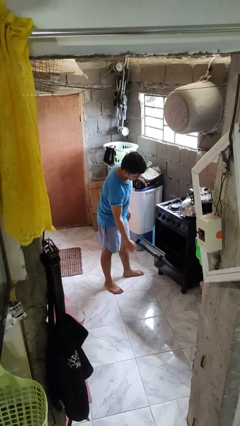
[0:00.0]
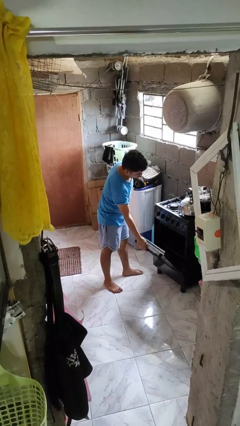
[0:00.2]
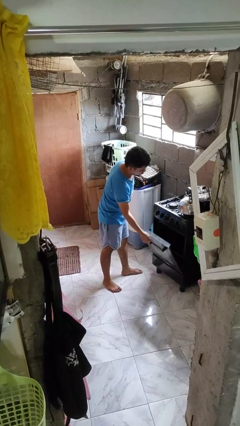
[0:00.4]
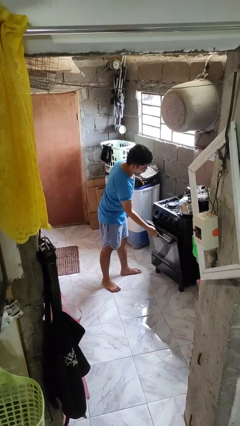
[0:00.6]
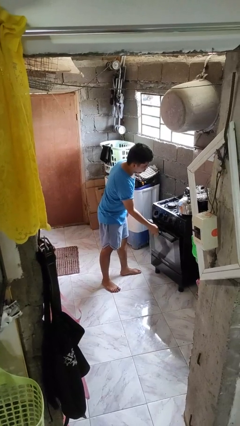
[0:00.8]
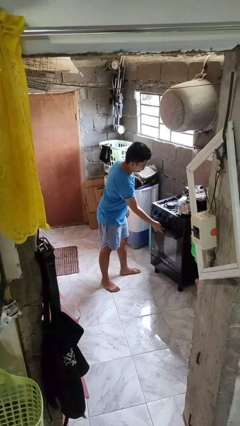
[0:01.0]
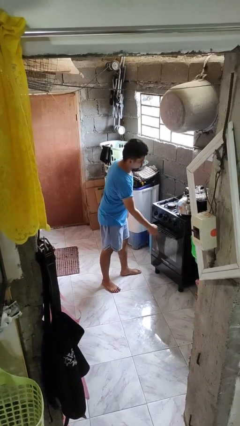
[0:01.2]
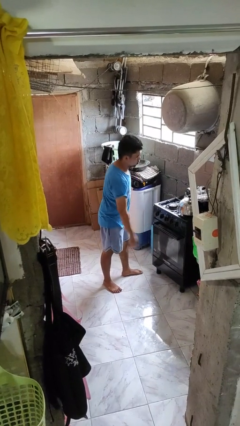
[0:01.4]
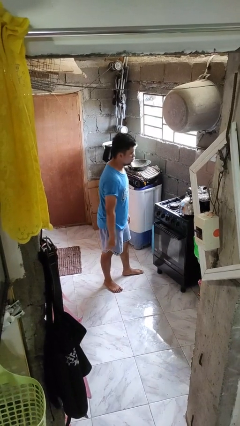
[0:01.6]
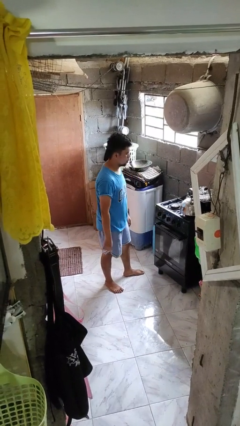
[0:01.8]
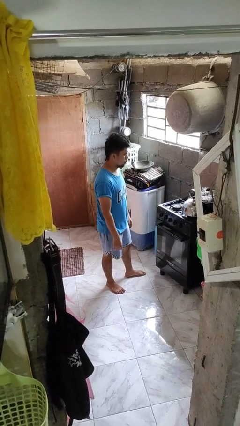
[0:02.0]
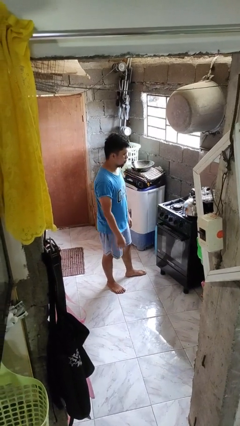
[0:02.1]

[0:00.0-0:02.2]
person closes oven door

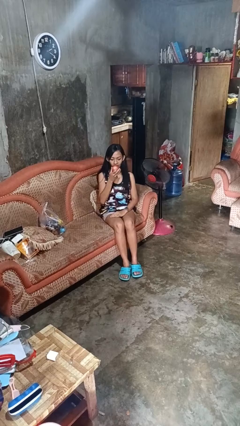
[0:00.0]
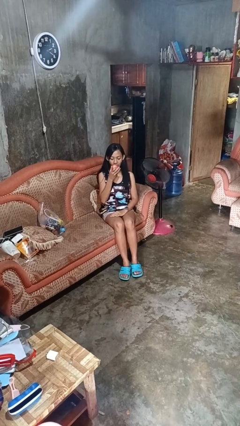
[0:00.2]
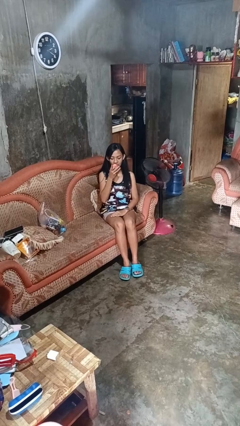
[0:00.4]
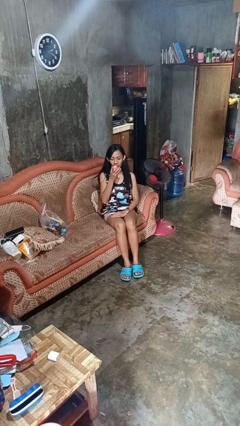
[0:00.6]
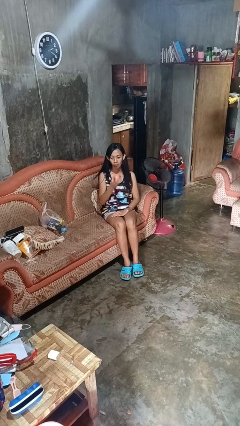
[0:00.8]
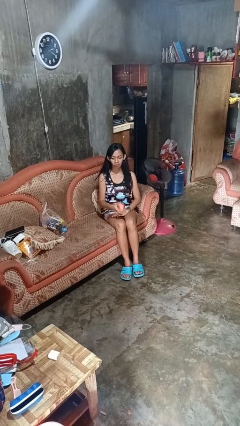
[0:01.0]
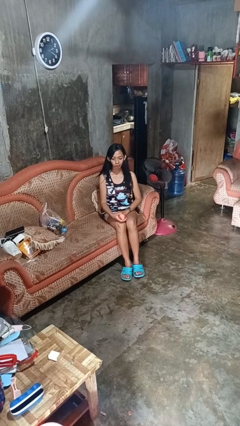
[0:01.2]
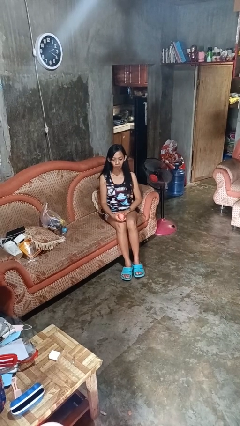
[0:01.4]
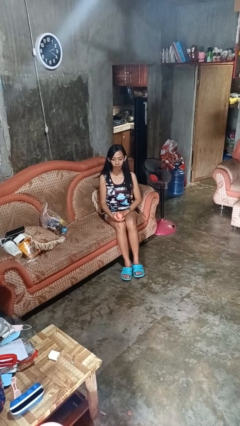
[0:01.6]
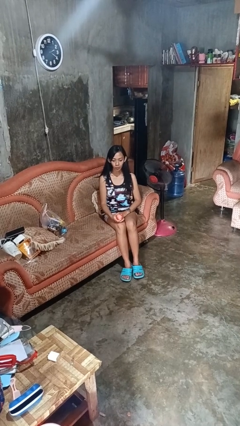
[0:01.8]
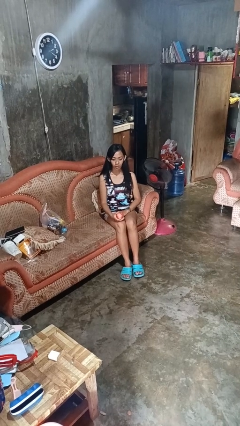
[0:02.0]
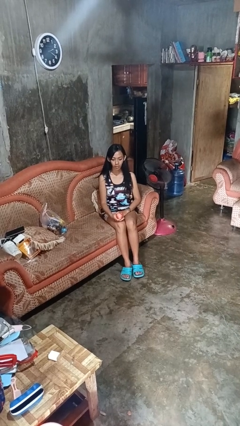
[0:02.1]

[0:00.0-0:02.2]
person eats apple

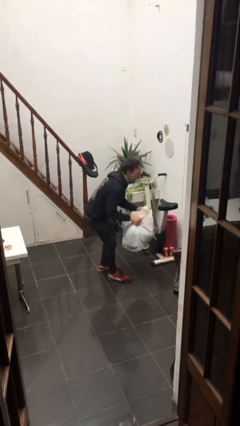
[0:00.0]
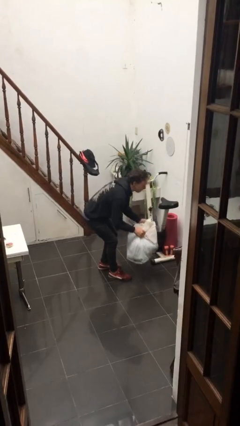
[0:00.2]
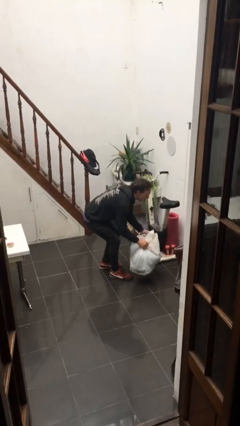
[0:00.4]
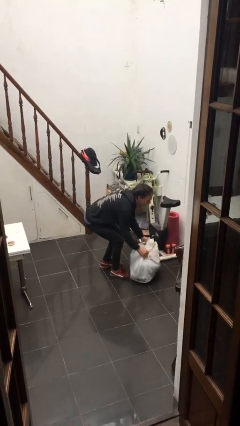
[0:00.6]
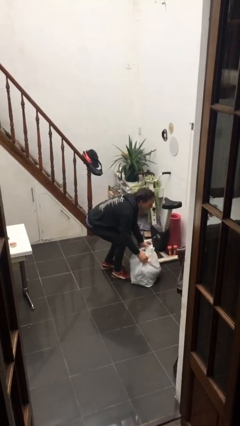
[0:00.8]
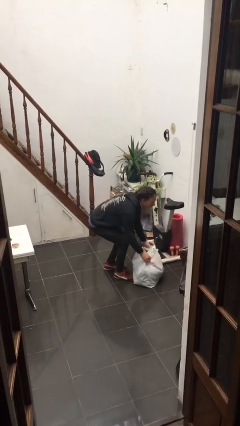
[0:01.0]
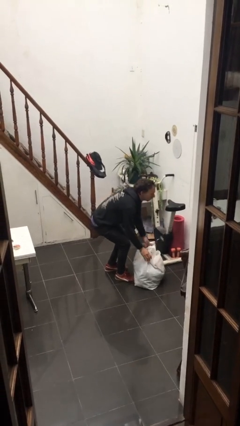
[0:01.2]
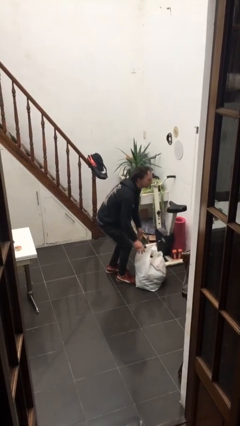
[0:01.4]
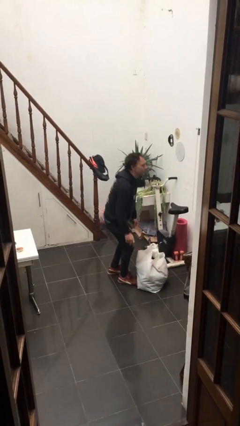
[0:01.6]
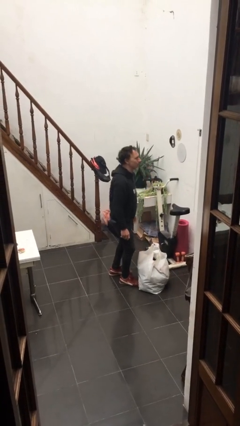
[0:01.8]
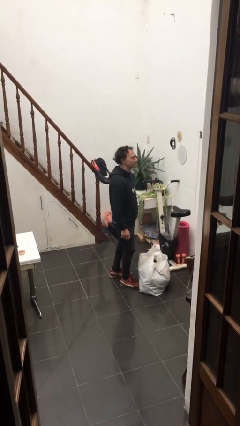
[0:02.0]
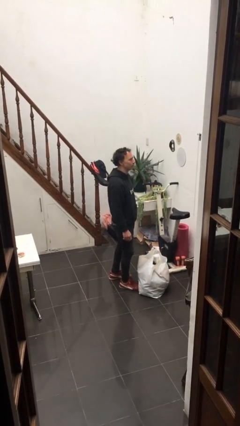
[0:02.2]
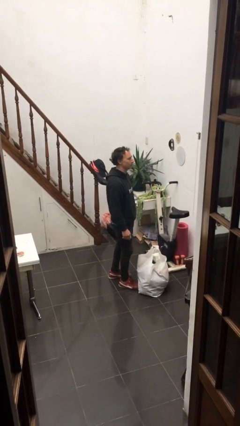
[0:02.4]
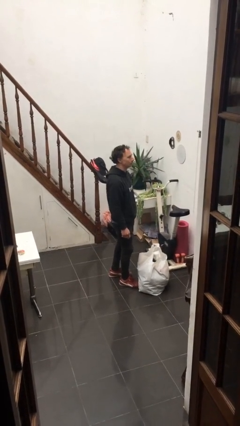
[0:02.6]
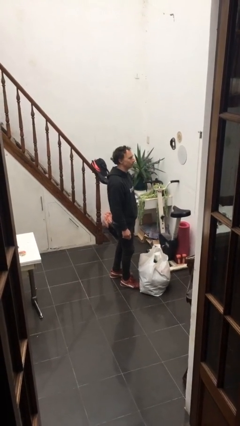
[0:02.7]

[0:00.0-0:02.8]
person puts down object on floor

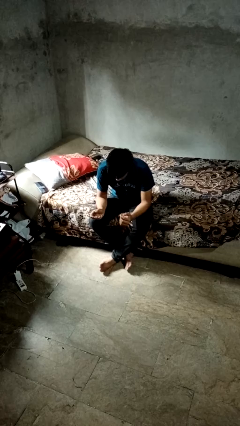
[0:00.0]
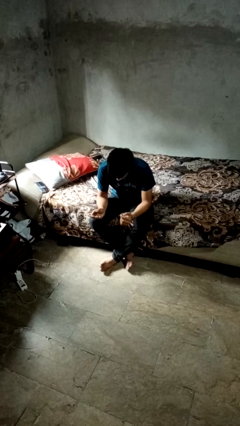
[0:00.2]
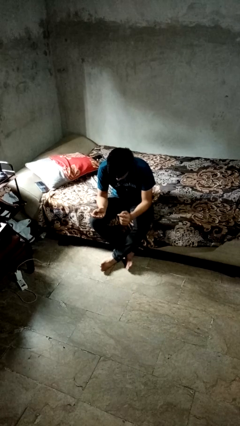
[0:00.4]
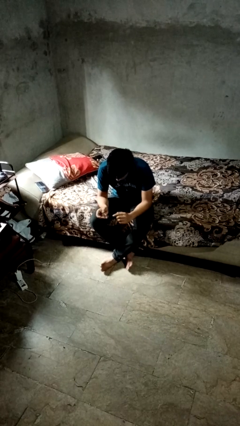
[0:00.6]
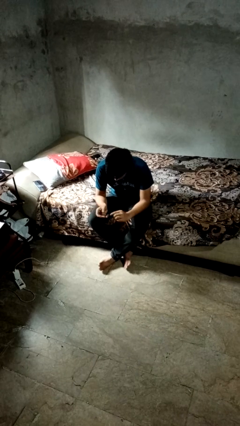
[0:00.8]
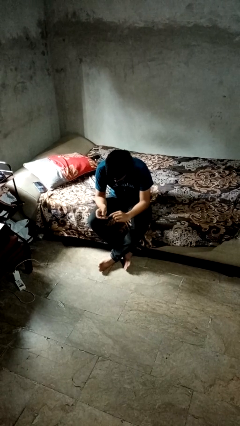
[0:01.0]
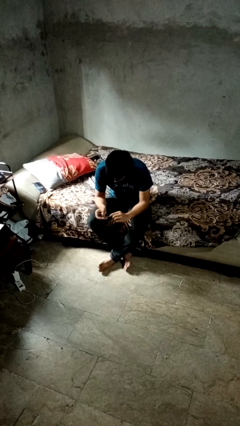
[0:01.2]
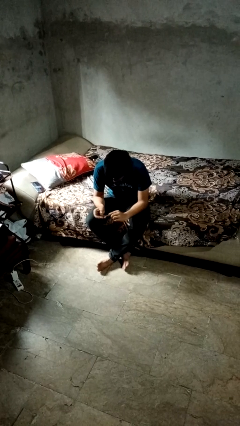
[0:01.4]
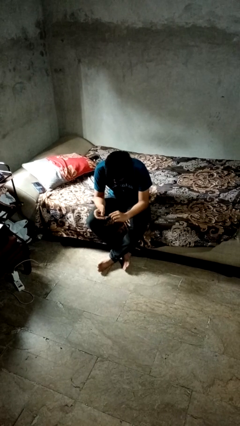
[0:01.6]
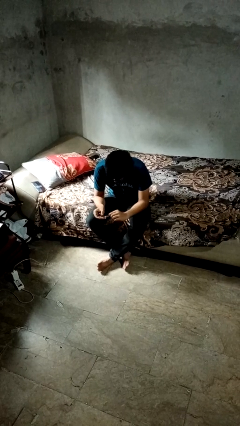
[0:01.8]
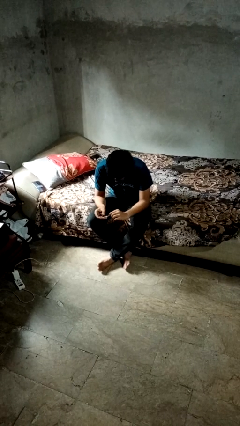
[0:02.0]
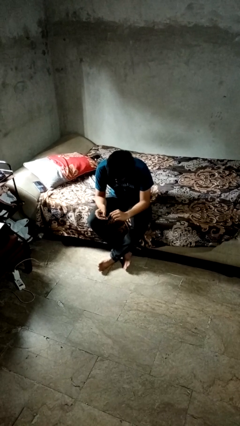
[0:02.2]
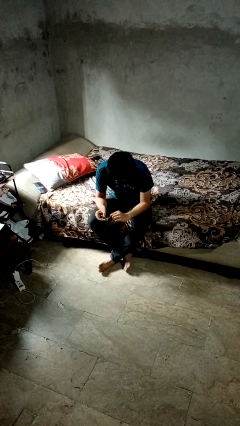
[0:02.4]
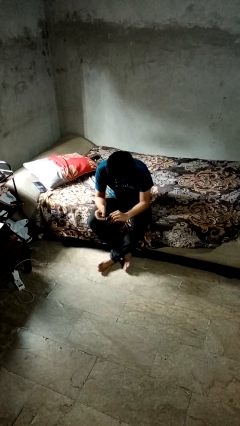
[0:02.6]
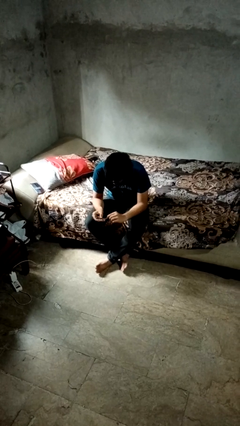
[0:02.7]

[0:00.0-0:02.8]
person clips fingernails

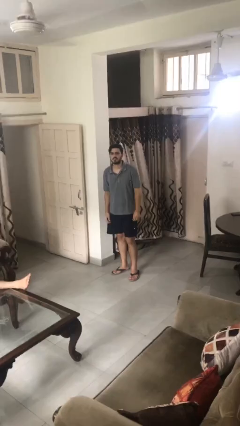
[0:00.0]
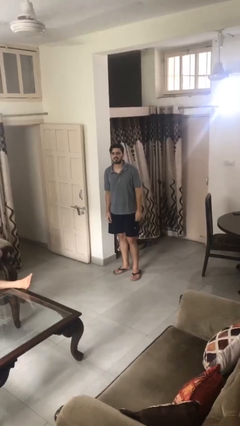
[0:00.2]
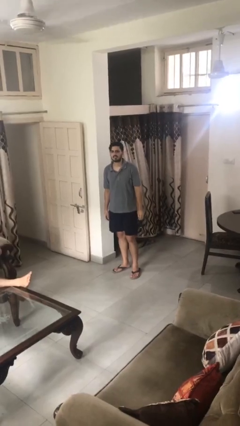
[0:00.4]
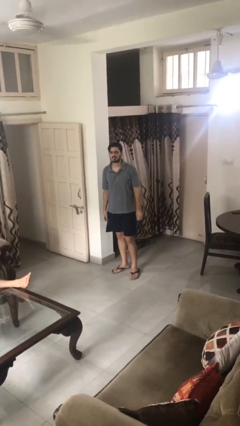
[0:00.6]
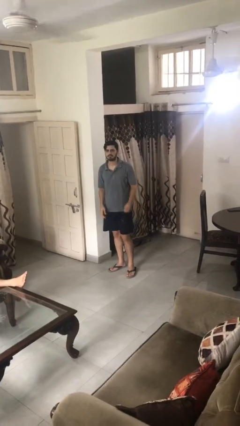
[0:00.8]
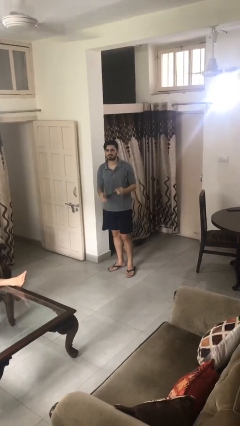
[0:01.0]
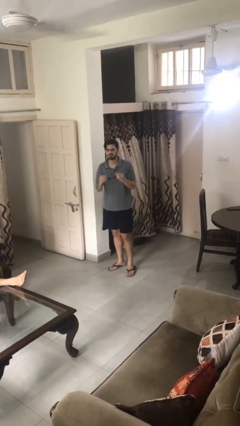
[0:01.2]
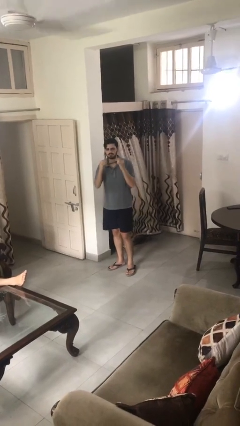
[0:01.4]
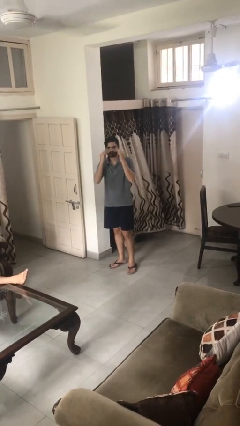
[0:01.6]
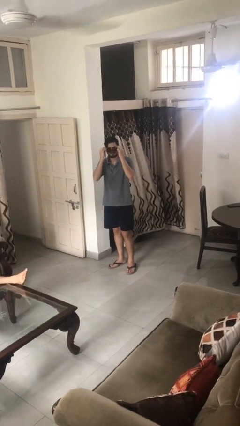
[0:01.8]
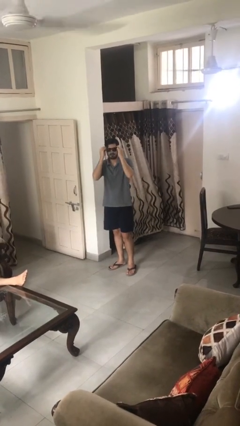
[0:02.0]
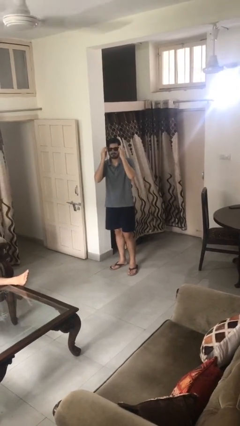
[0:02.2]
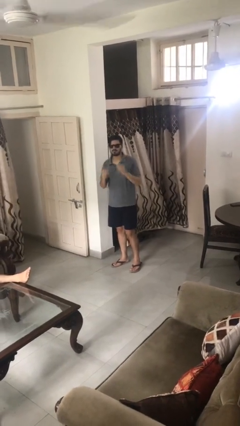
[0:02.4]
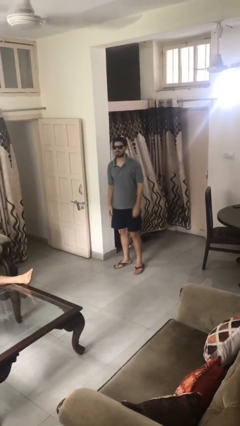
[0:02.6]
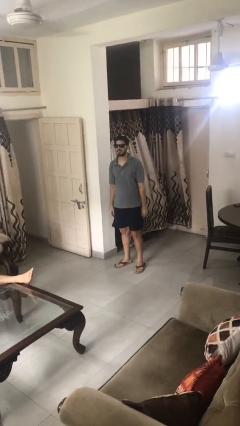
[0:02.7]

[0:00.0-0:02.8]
person puts on sunglasses

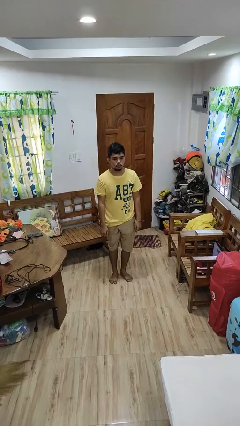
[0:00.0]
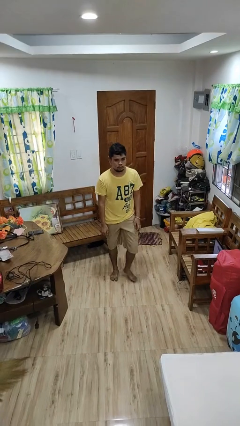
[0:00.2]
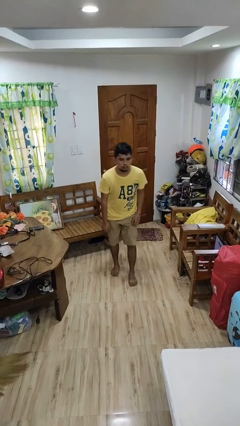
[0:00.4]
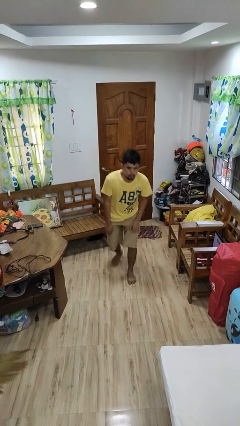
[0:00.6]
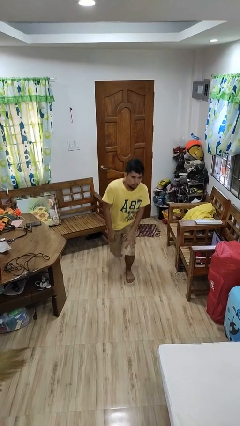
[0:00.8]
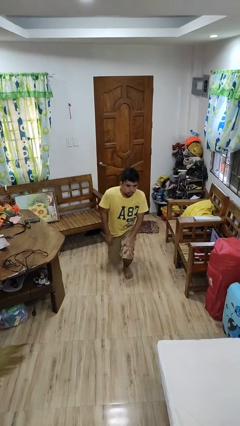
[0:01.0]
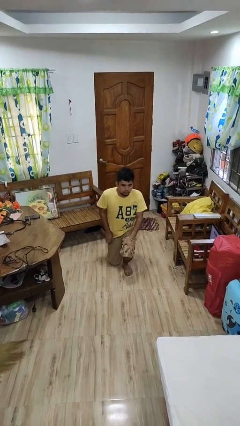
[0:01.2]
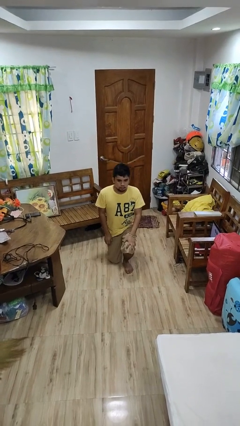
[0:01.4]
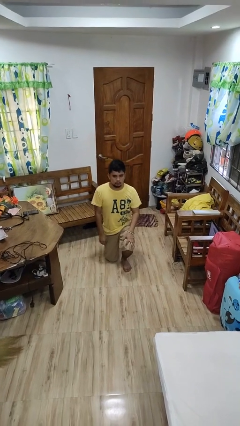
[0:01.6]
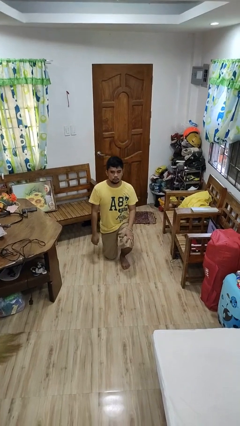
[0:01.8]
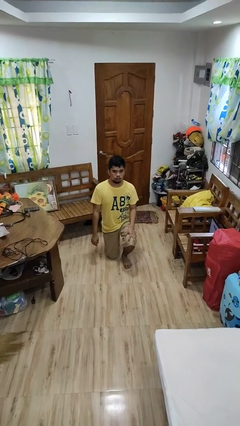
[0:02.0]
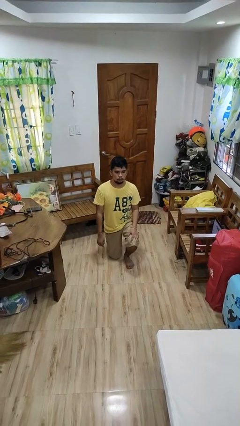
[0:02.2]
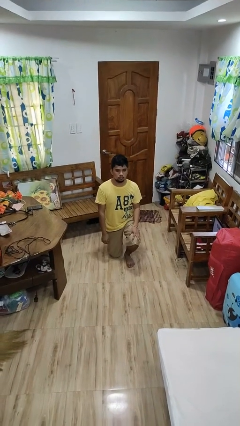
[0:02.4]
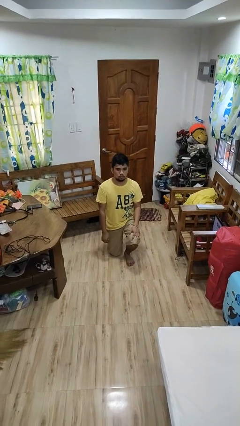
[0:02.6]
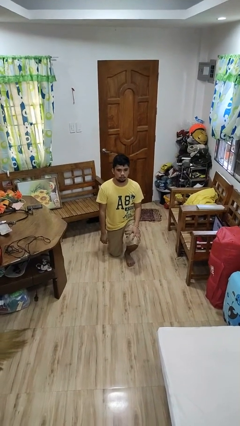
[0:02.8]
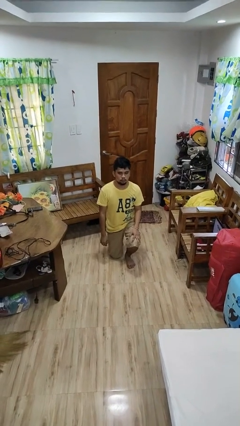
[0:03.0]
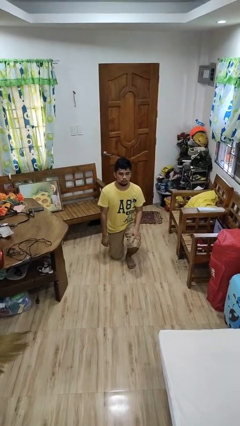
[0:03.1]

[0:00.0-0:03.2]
person kneels

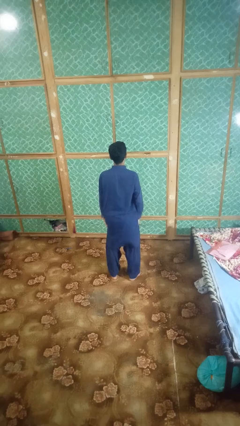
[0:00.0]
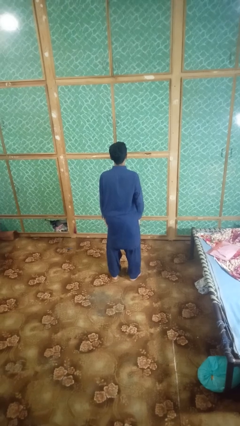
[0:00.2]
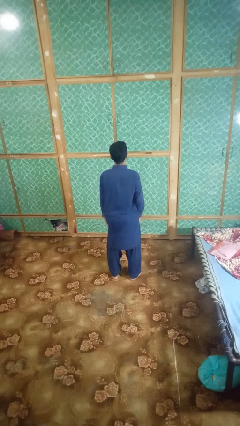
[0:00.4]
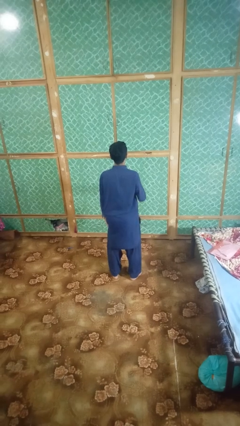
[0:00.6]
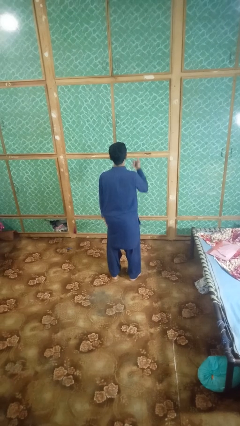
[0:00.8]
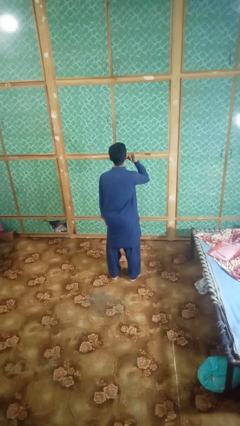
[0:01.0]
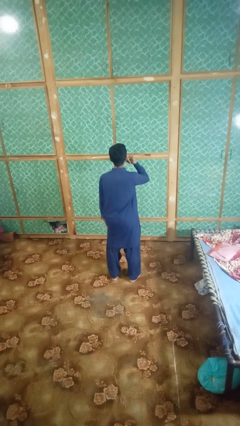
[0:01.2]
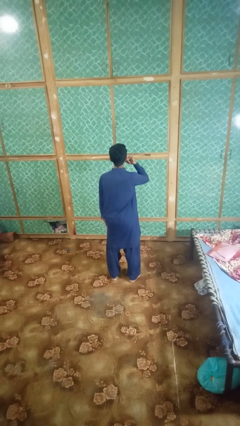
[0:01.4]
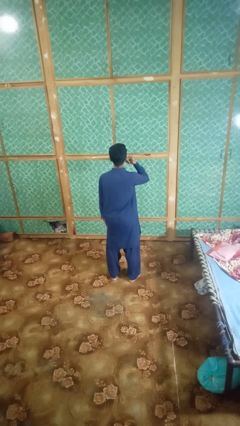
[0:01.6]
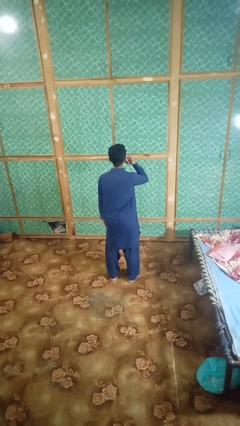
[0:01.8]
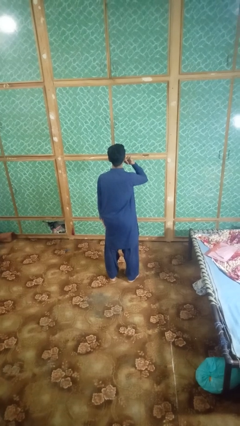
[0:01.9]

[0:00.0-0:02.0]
person gestures call me
